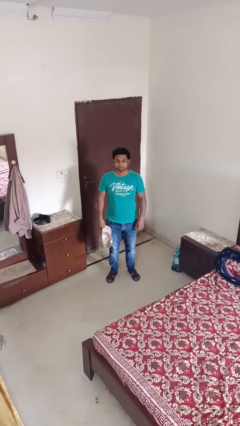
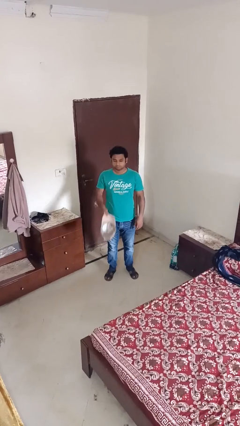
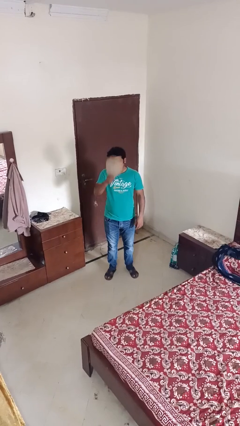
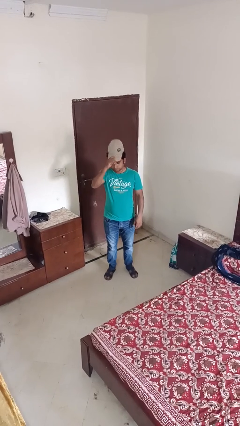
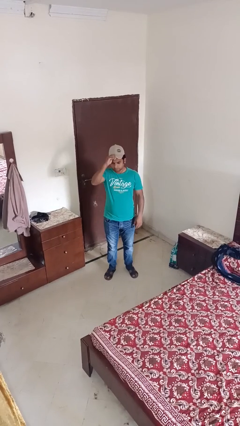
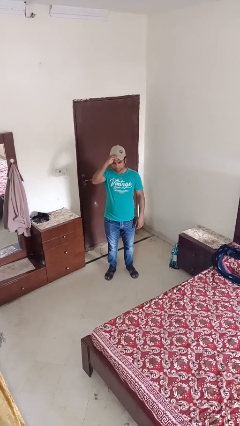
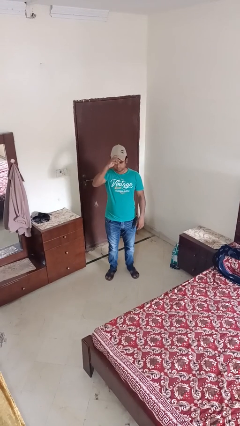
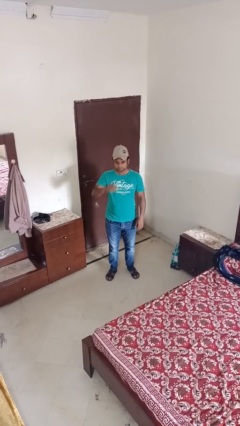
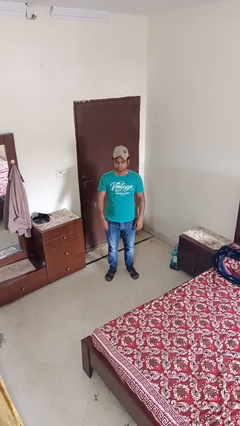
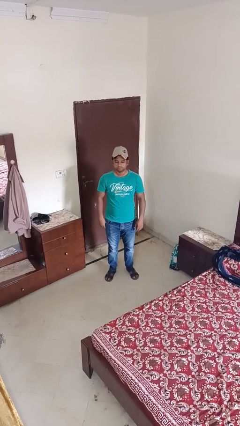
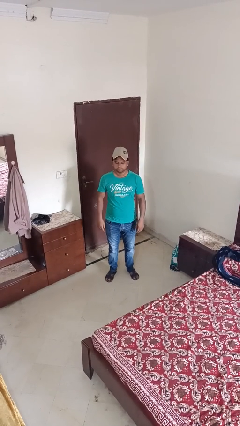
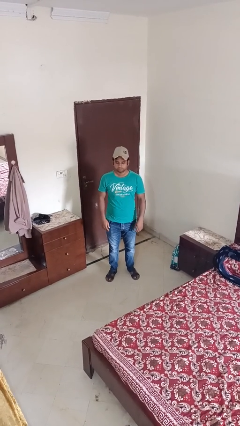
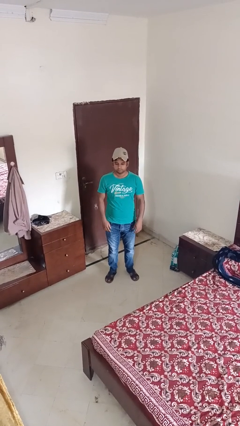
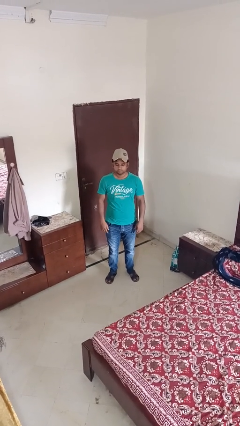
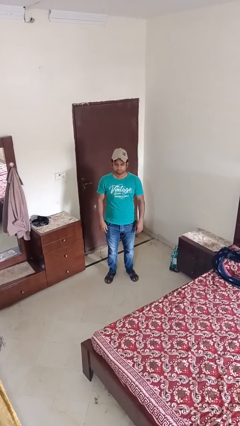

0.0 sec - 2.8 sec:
person puts on hat

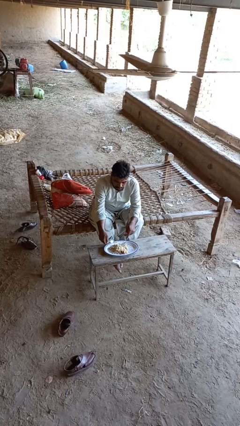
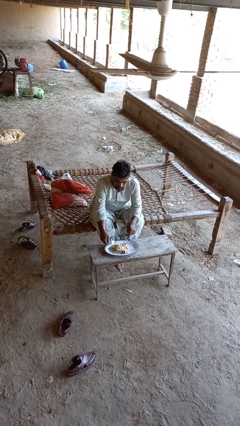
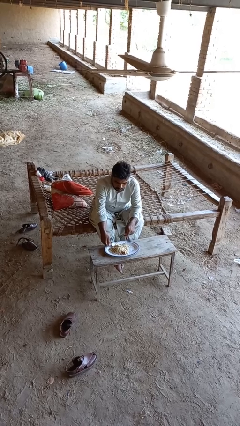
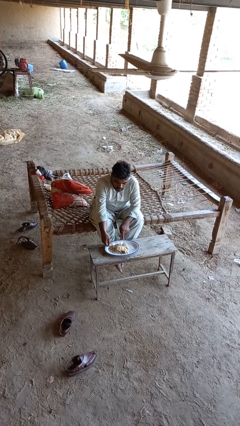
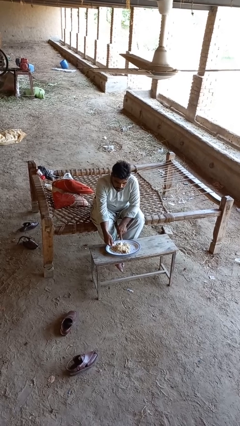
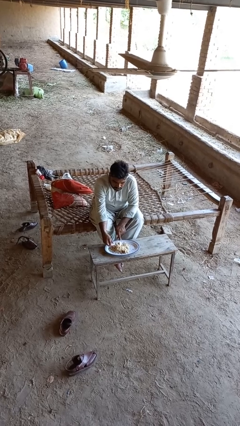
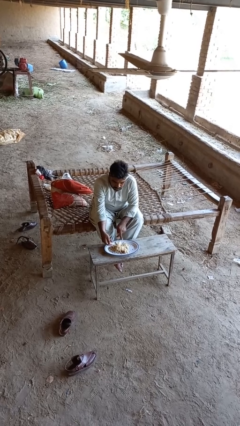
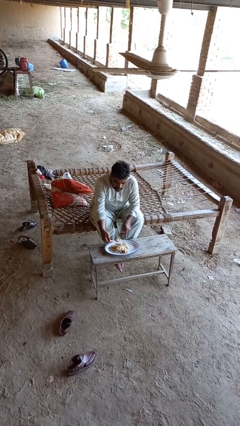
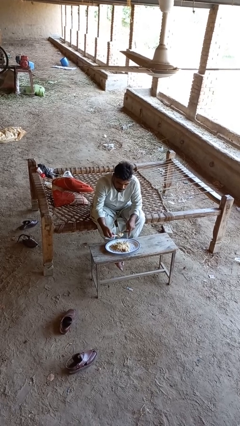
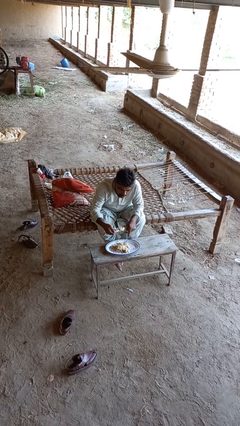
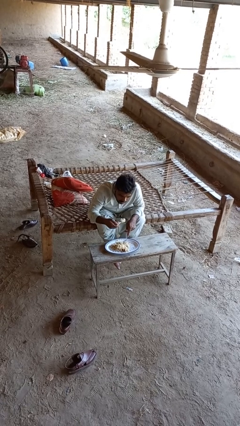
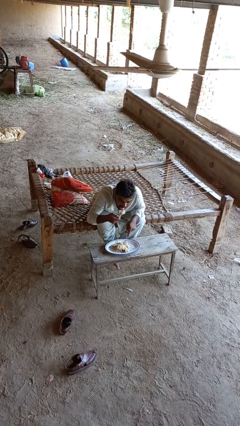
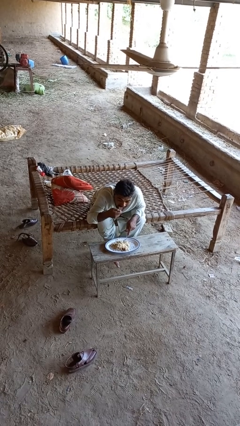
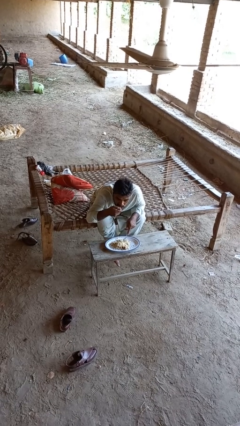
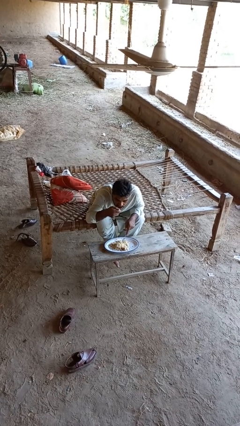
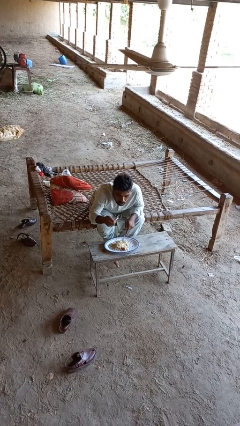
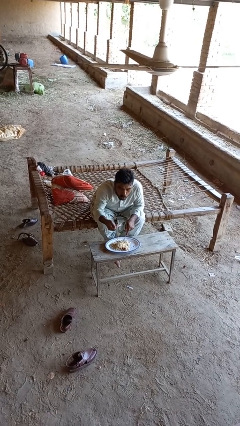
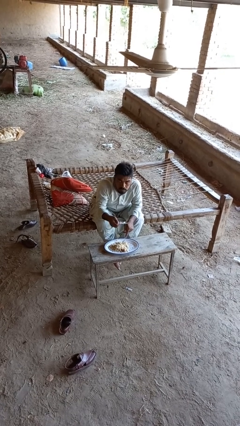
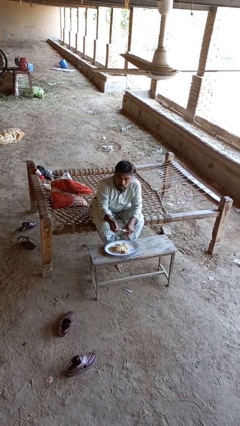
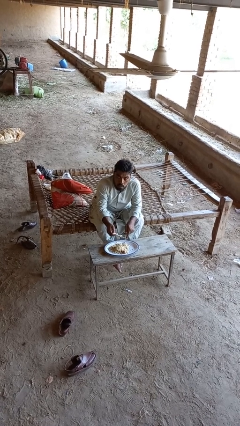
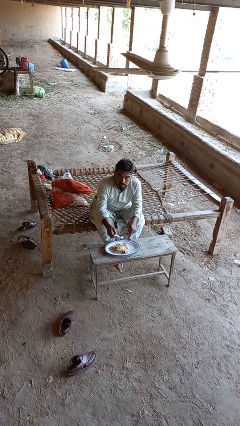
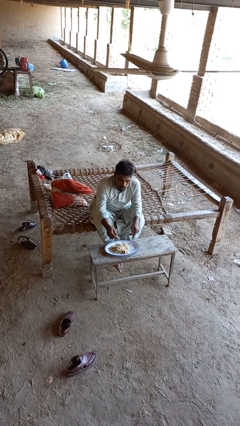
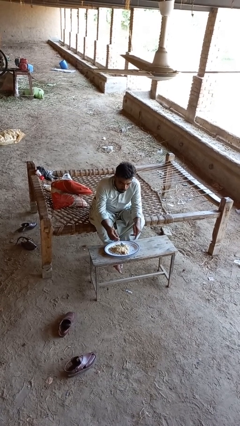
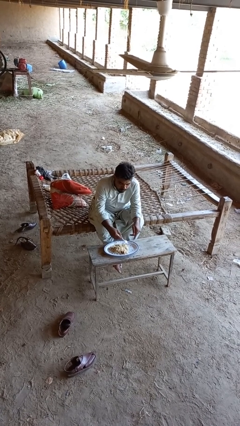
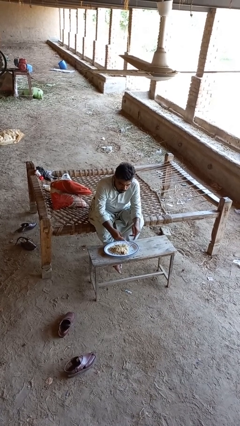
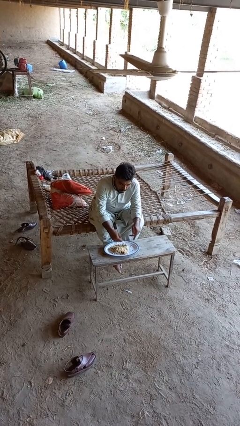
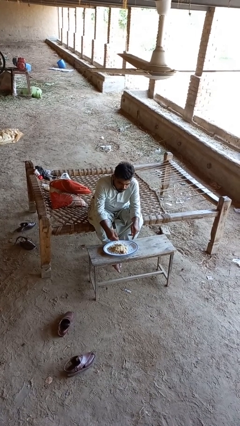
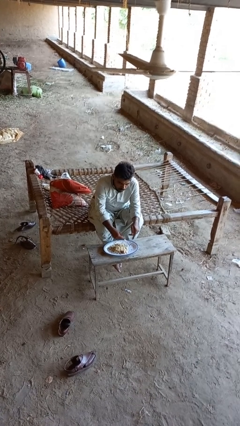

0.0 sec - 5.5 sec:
person eats with utensil

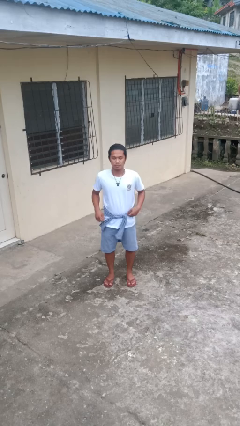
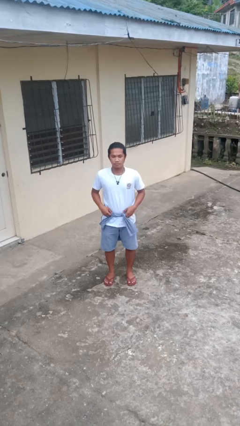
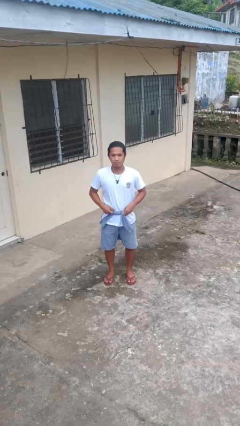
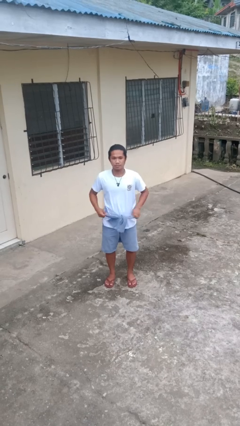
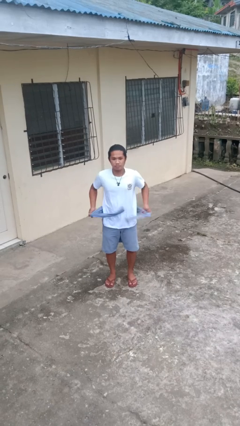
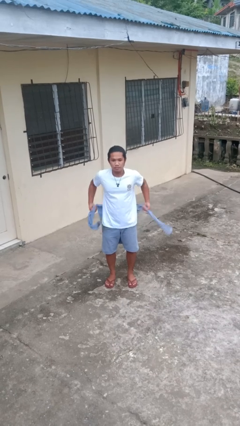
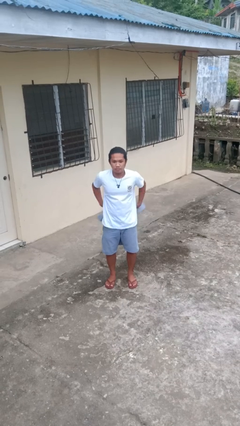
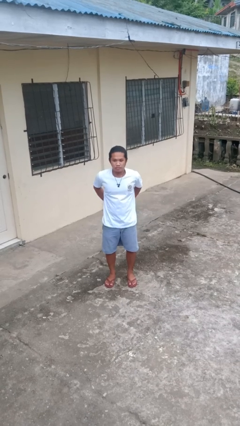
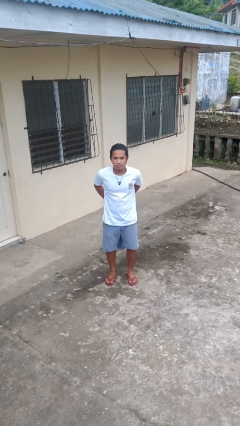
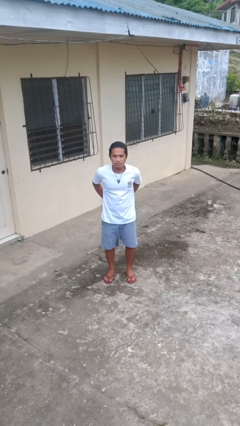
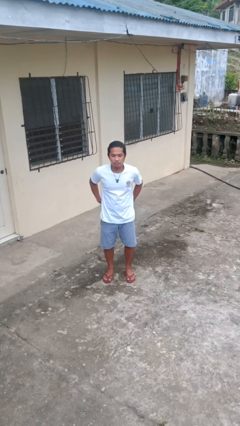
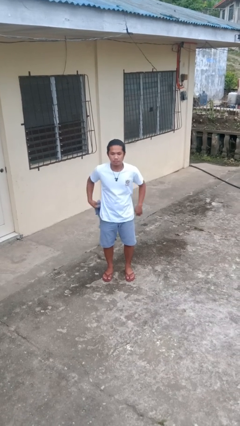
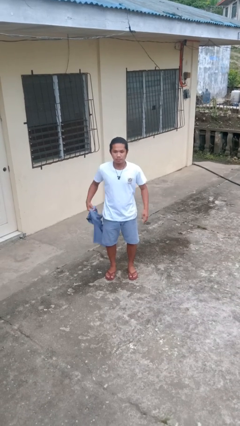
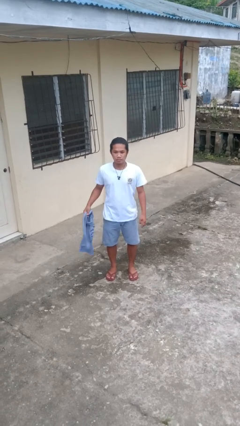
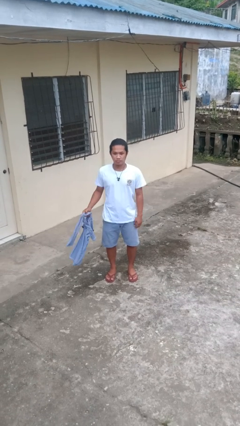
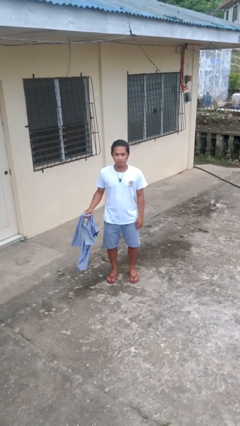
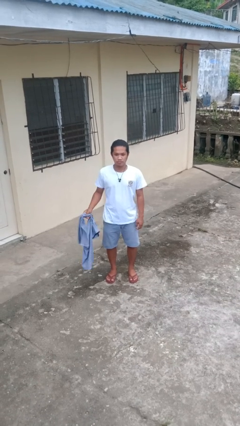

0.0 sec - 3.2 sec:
person unties jacket around waist

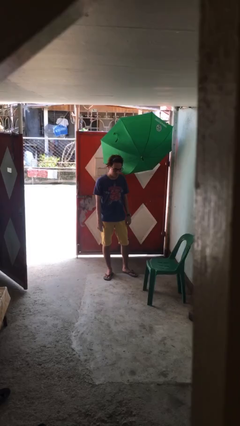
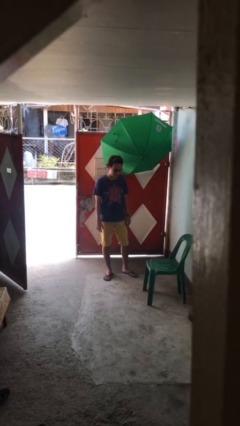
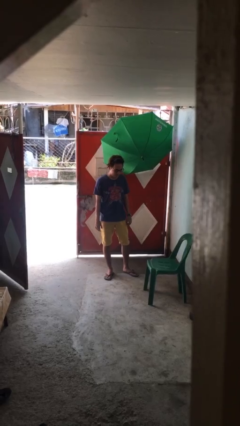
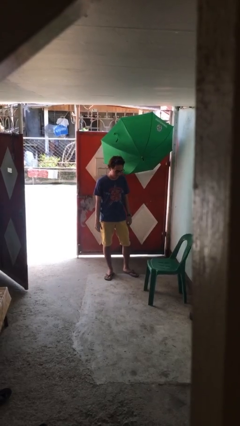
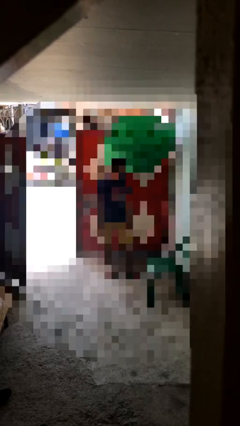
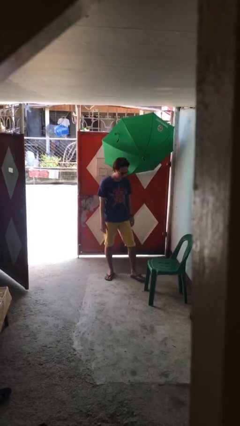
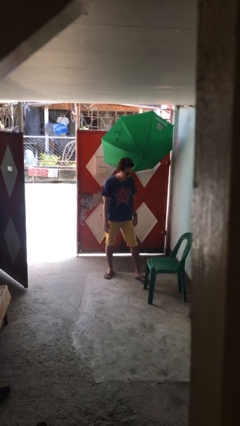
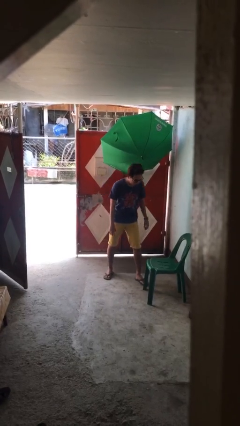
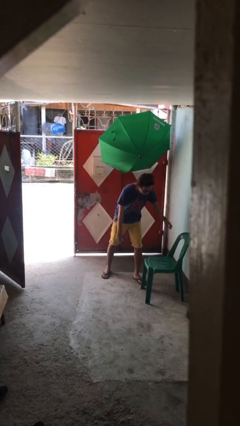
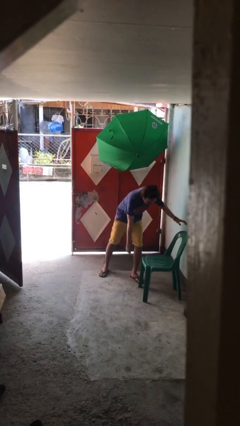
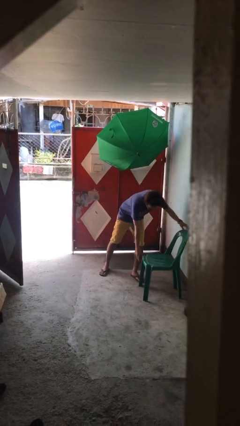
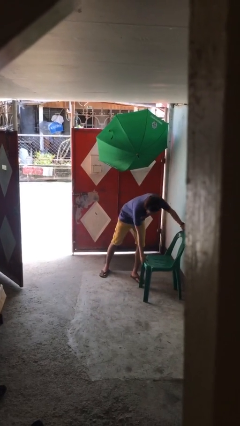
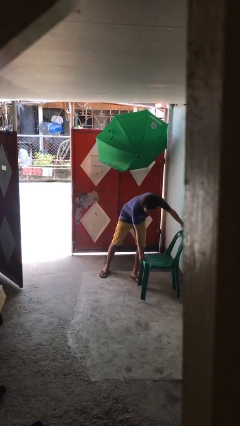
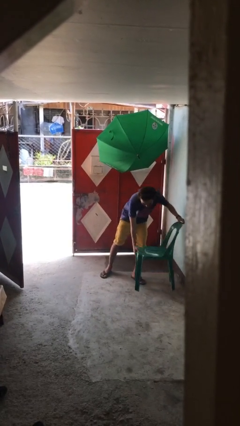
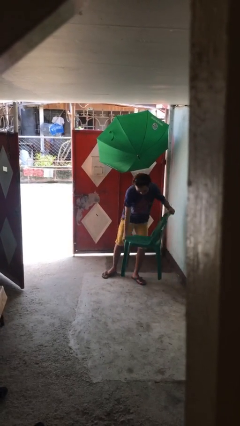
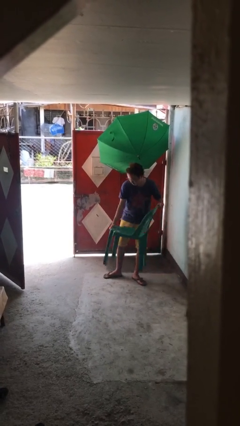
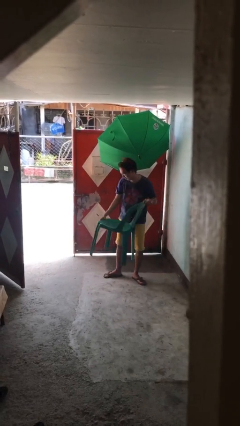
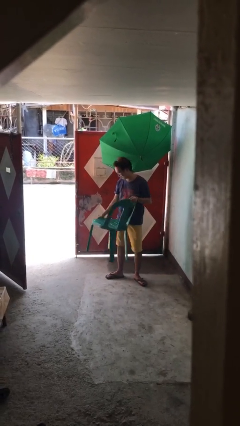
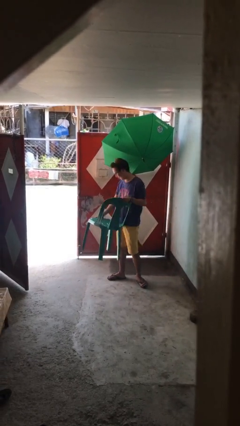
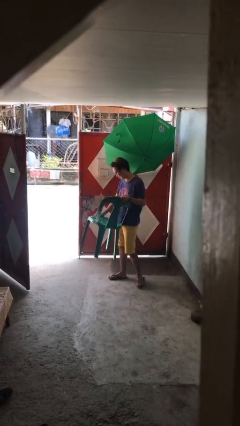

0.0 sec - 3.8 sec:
person picks up object from floor

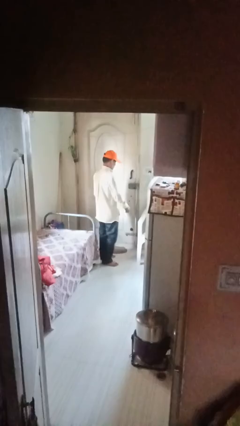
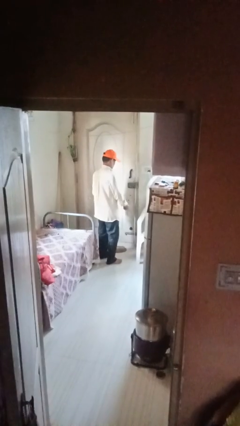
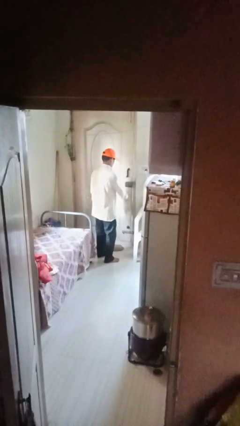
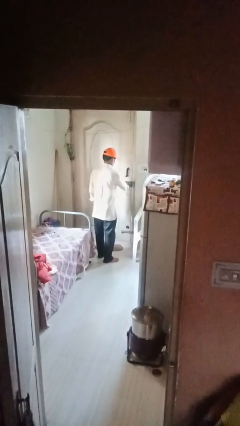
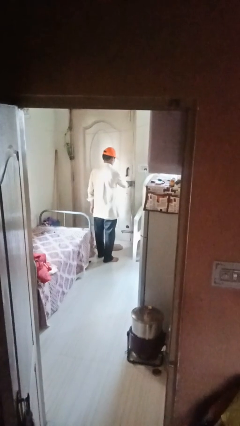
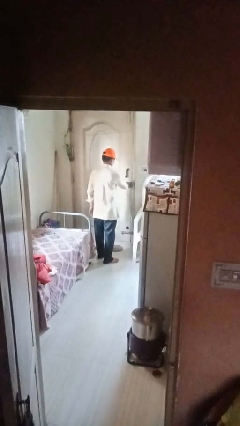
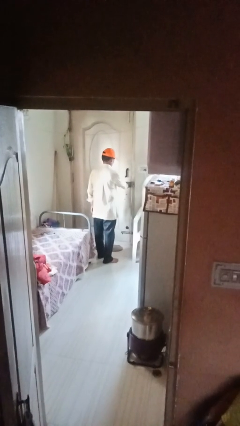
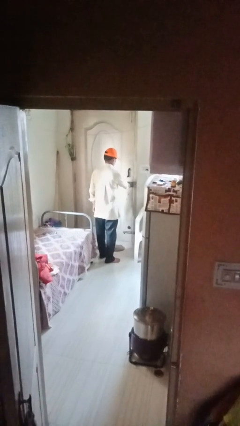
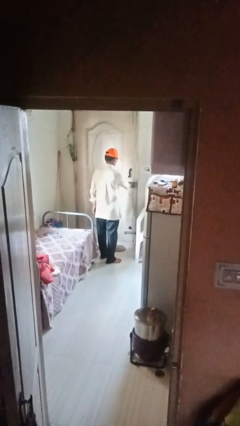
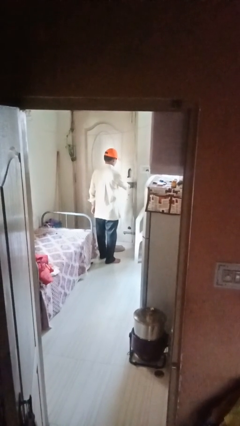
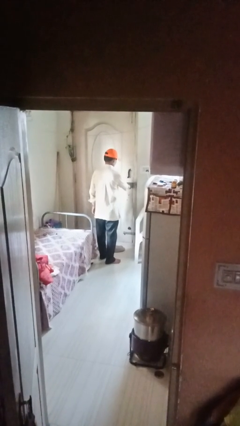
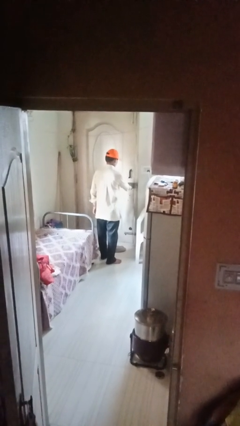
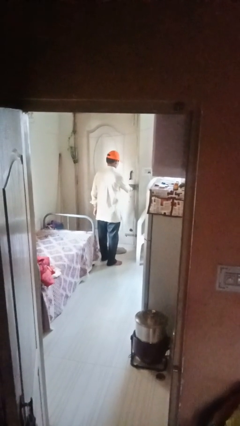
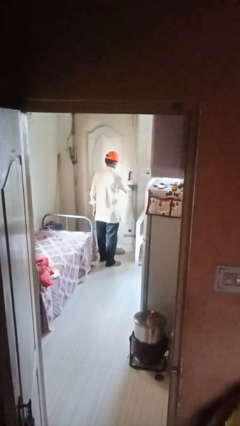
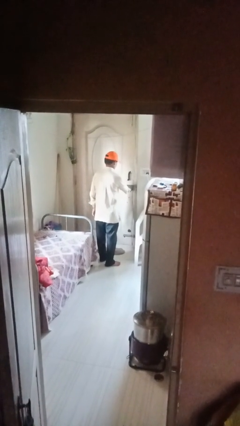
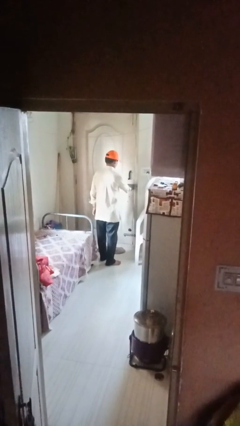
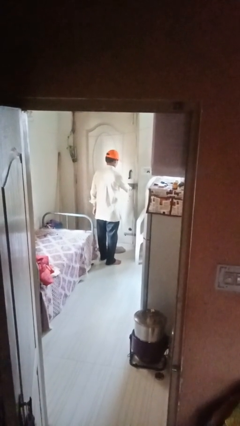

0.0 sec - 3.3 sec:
person unlocks door with keys
